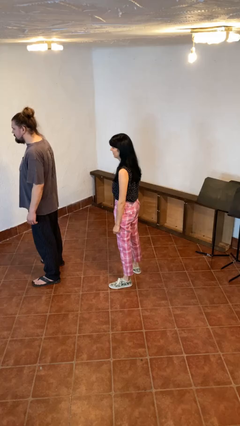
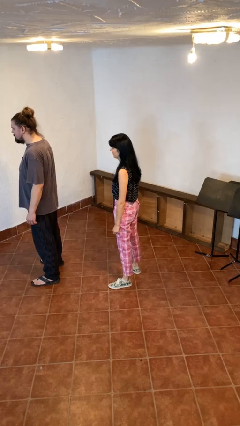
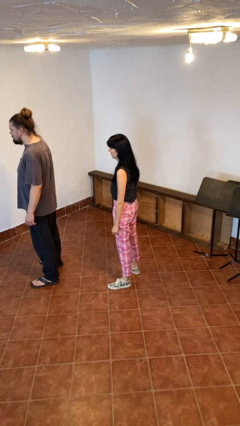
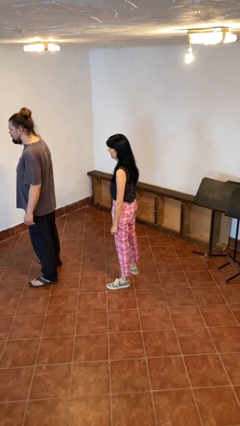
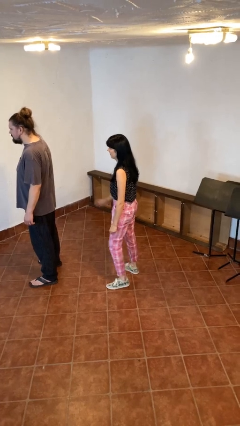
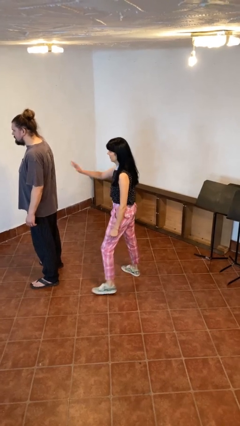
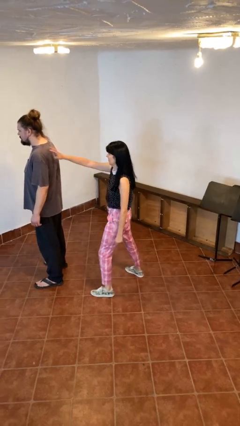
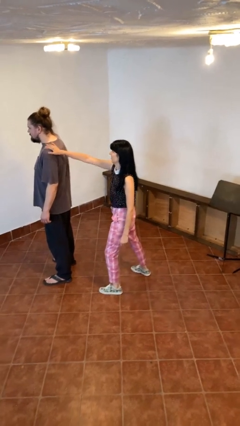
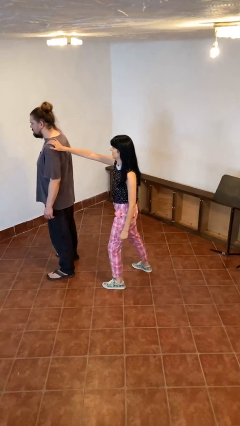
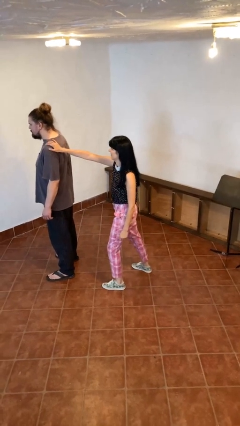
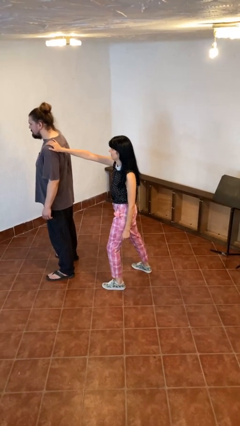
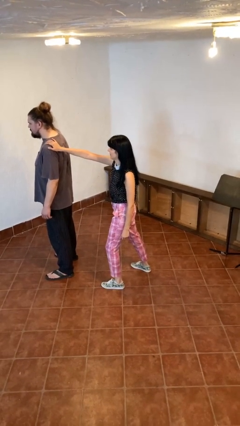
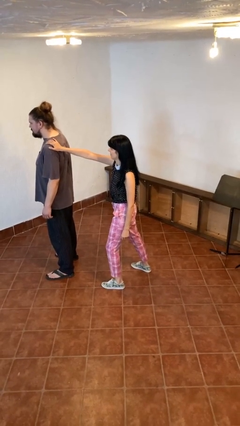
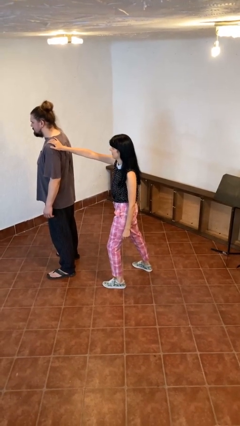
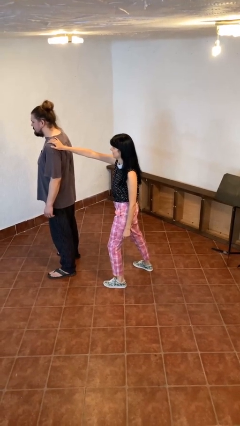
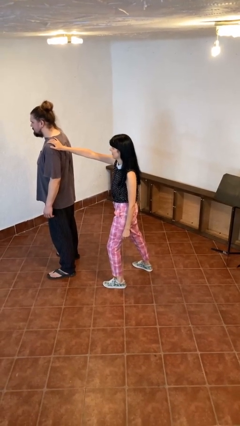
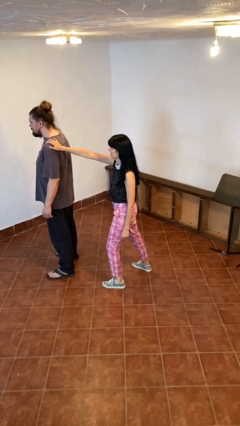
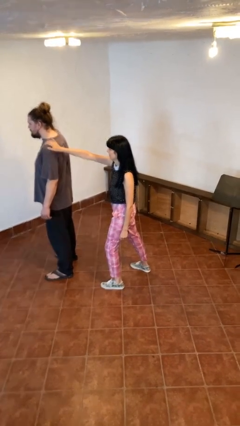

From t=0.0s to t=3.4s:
person grabs person by shoulder

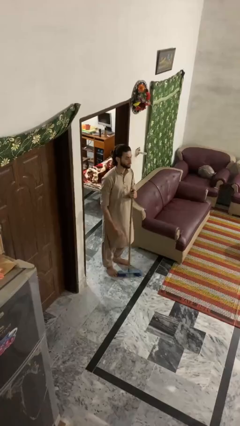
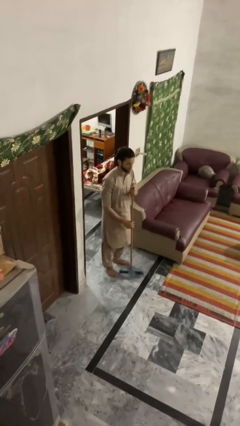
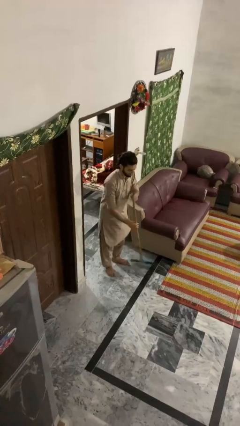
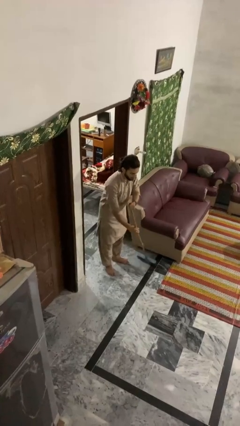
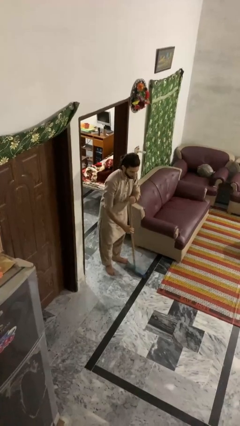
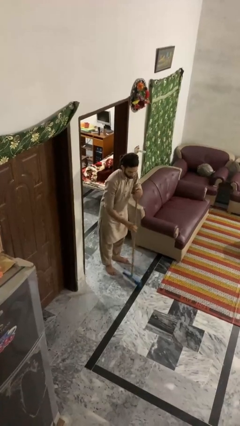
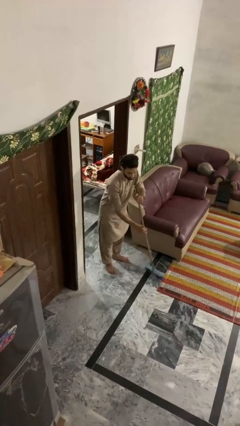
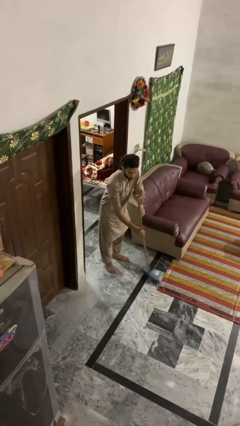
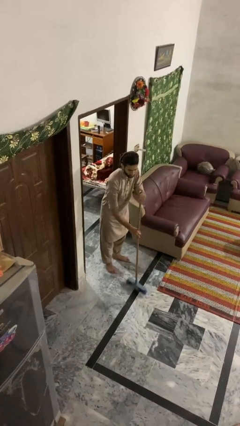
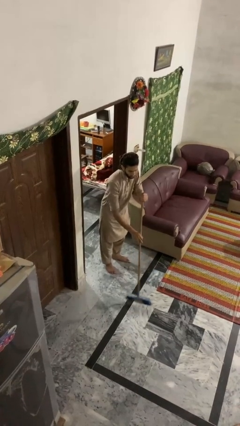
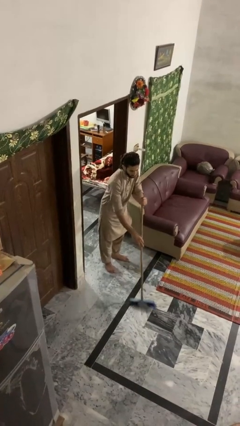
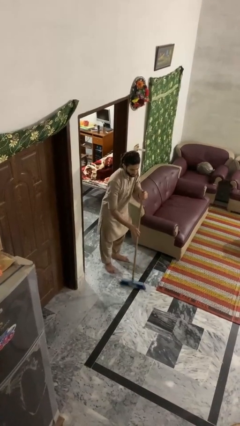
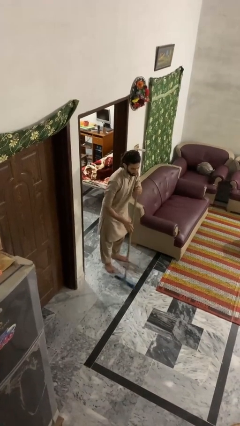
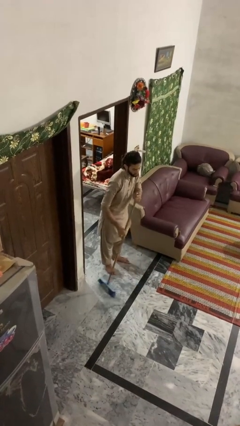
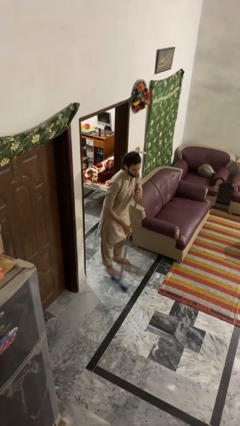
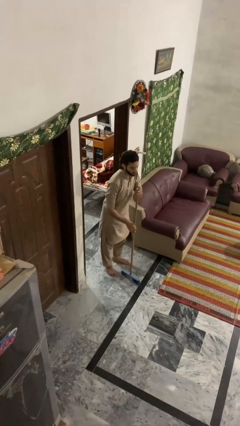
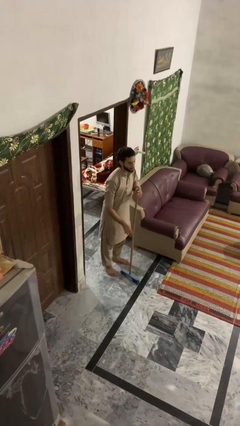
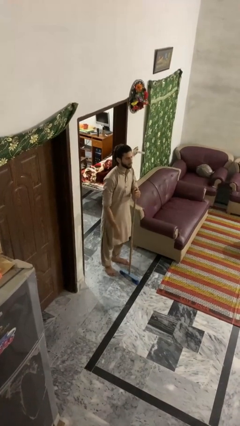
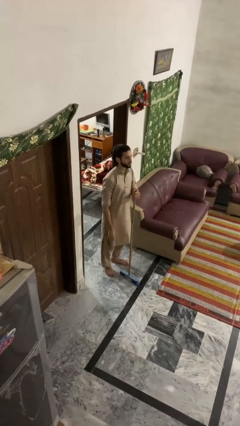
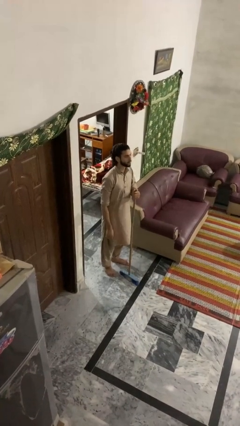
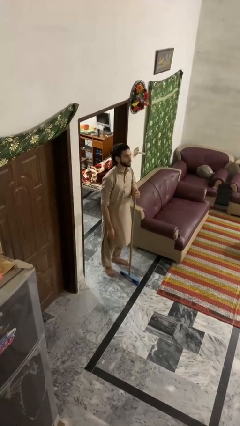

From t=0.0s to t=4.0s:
person sweeps floor

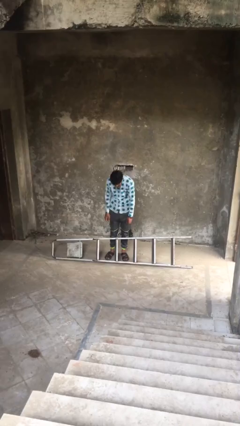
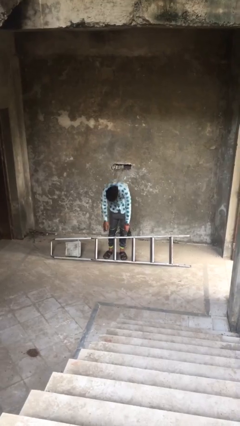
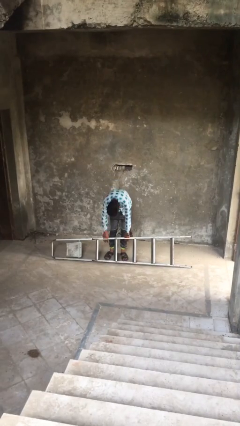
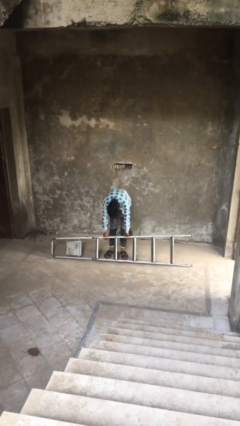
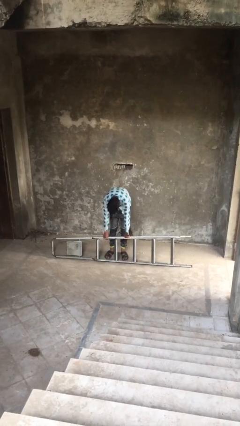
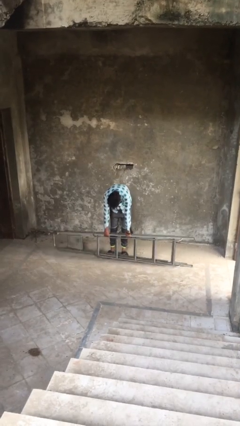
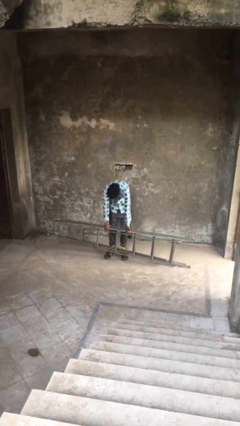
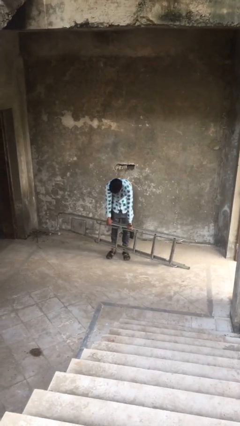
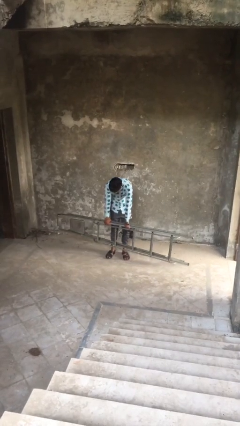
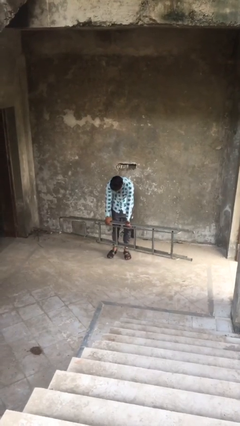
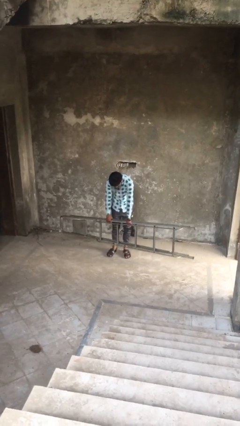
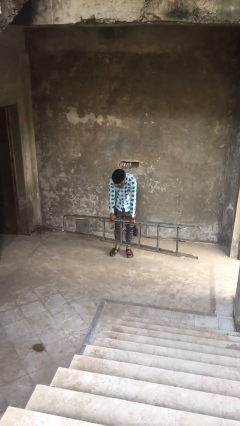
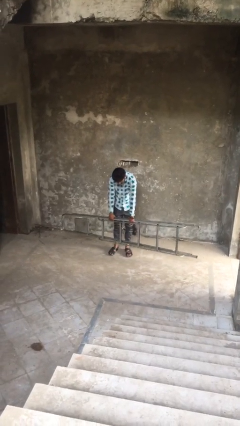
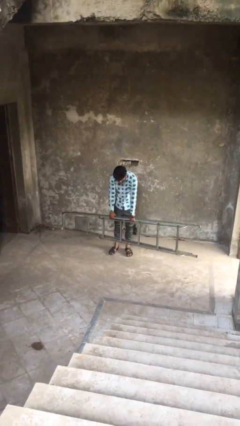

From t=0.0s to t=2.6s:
person picks up object from floor

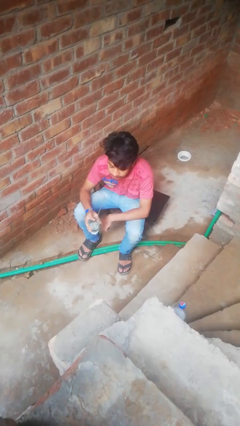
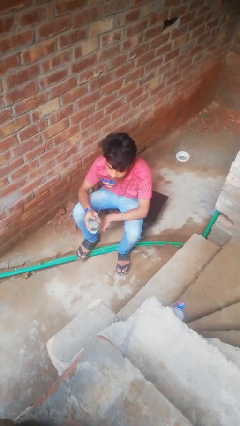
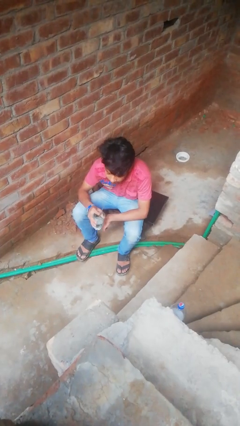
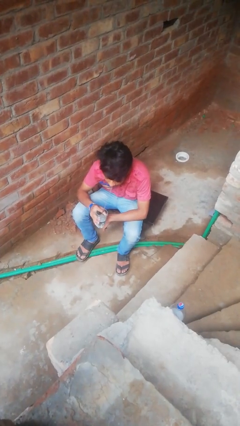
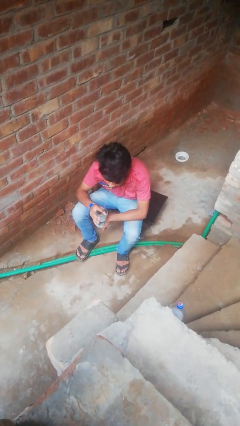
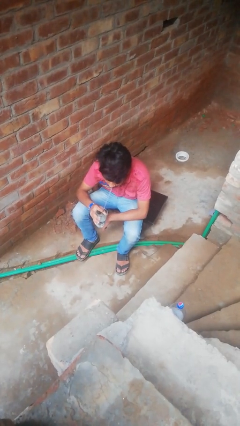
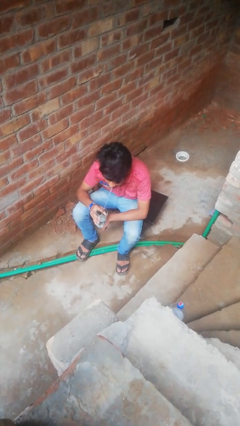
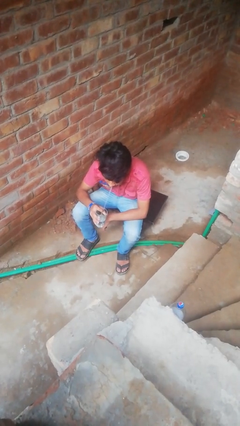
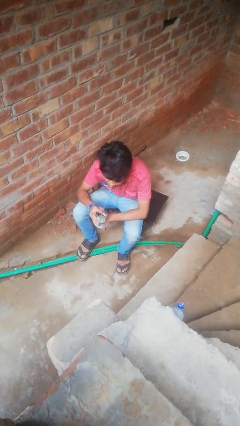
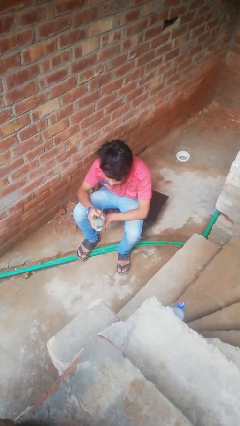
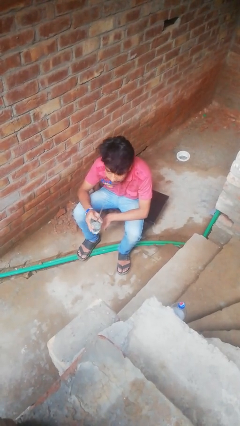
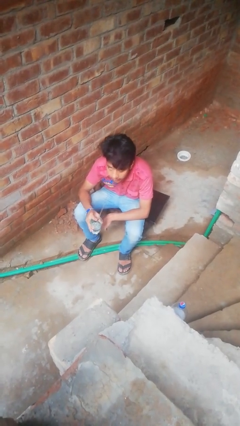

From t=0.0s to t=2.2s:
person drinks from straw

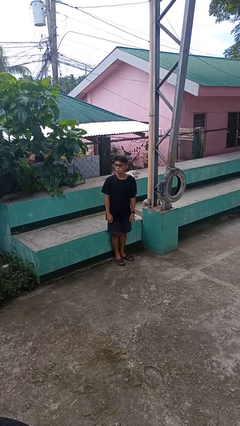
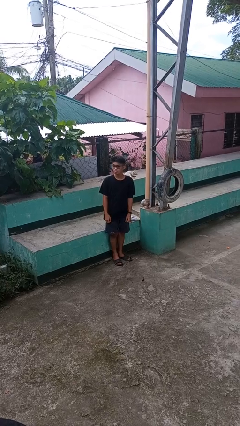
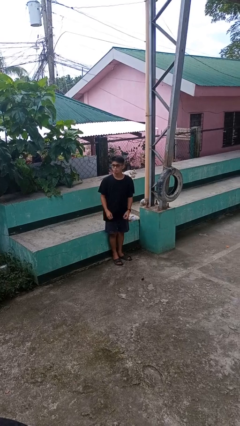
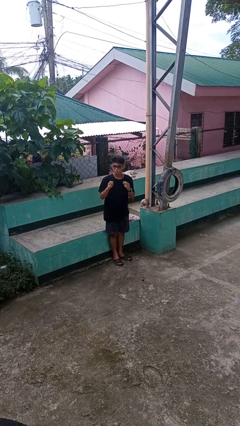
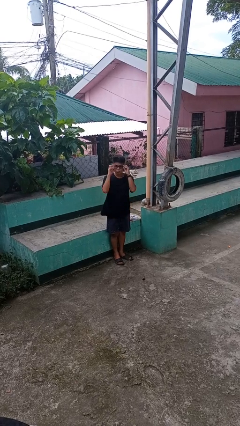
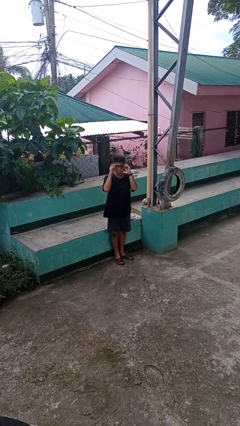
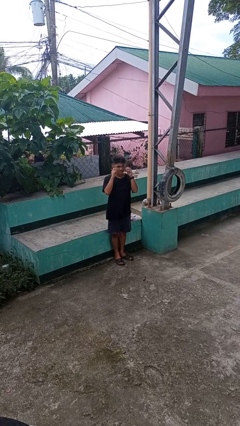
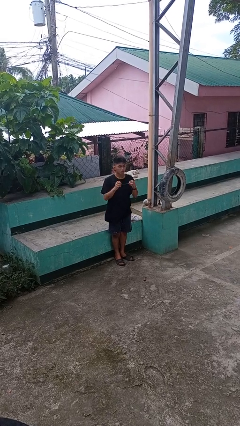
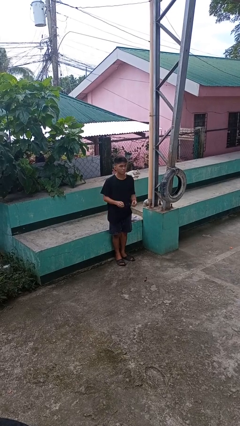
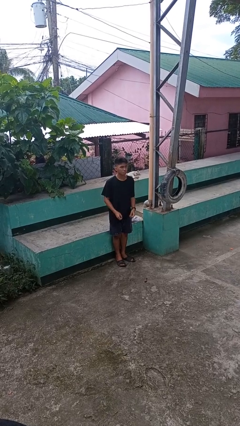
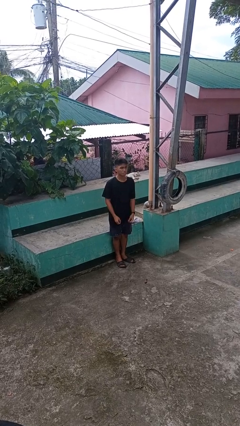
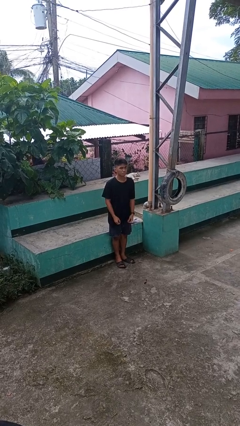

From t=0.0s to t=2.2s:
person takes off glasses

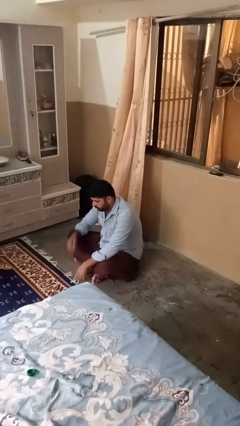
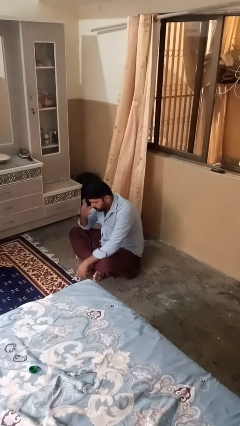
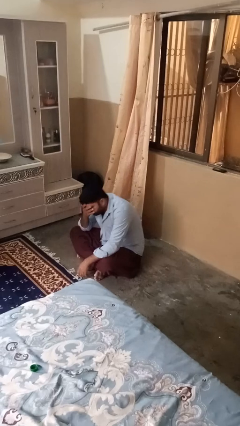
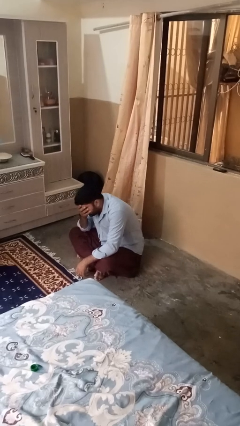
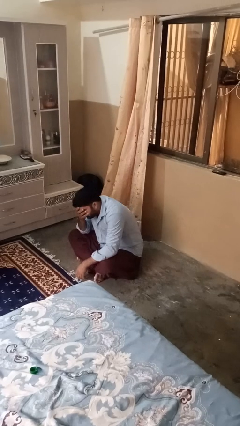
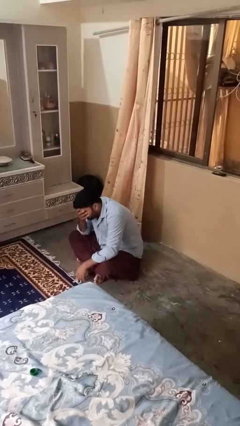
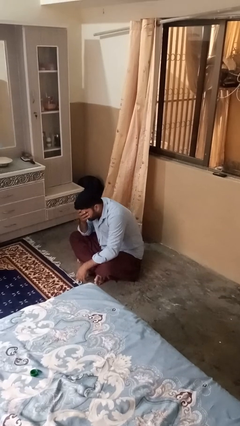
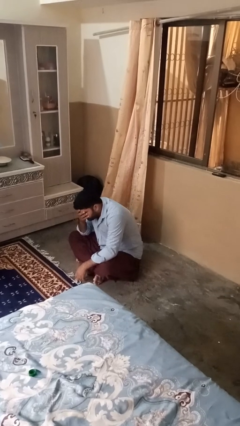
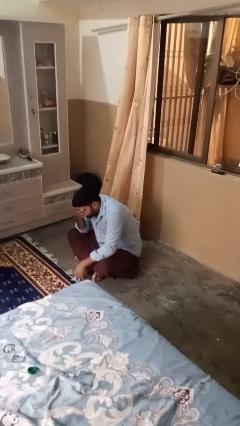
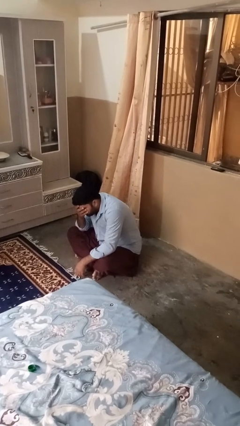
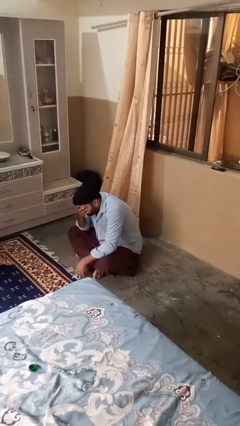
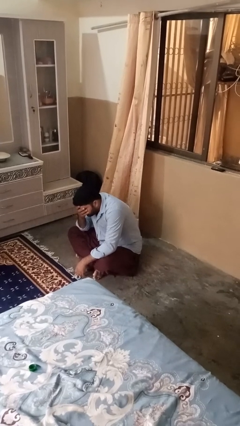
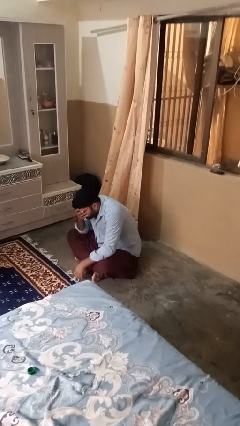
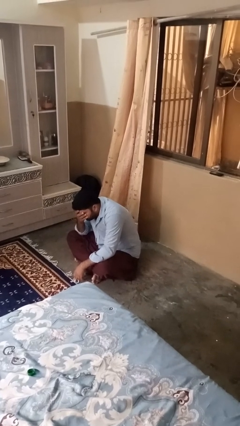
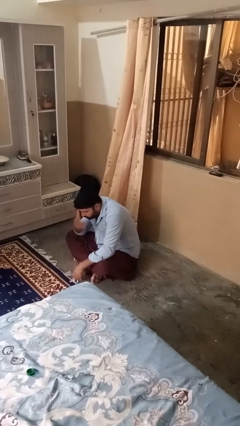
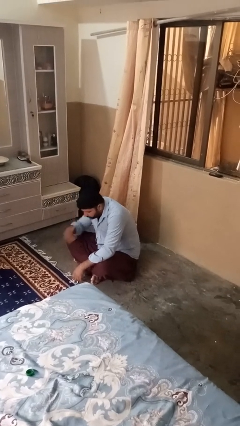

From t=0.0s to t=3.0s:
person covers face with hands

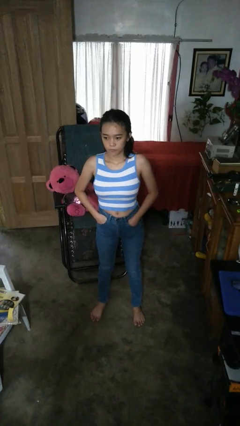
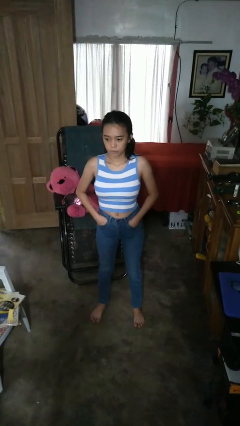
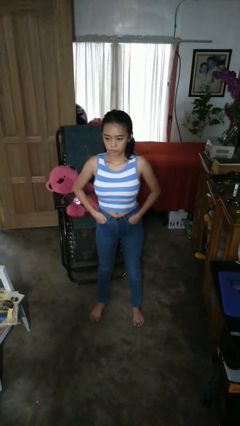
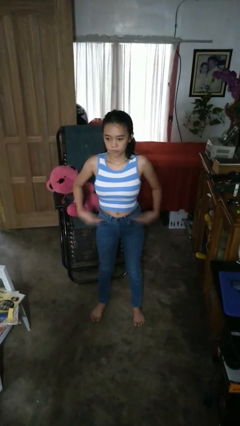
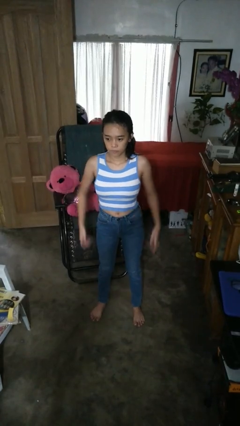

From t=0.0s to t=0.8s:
person puts hands in back pockets
